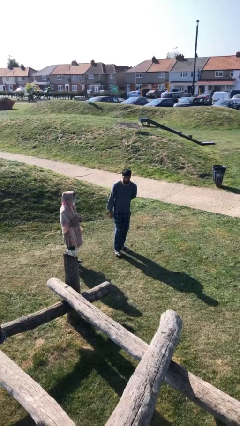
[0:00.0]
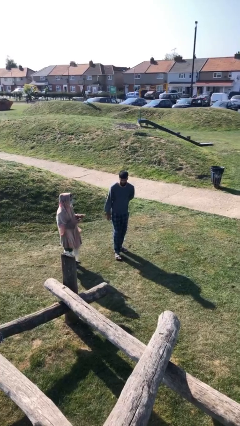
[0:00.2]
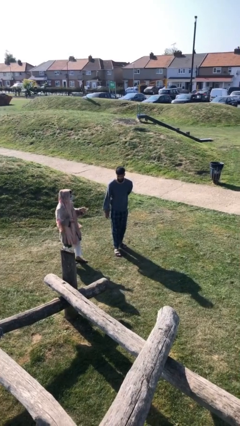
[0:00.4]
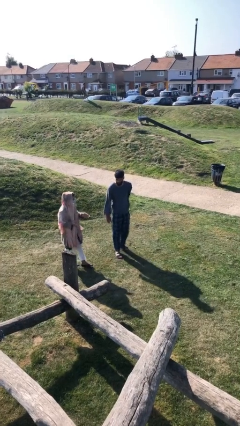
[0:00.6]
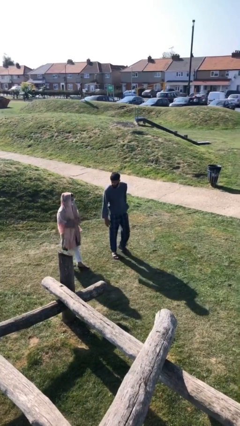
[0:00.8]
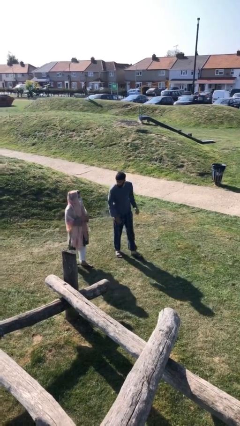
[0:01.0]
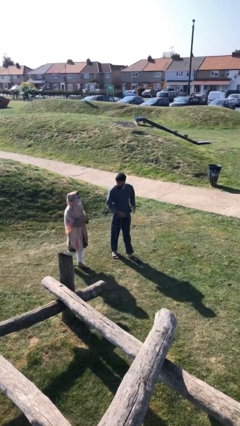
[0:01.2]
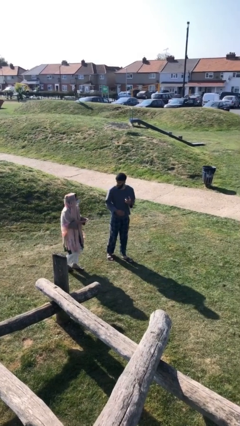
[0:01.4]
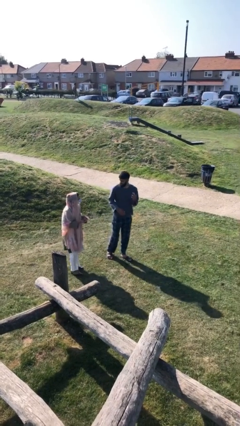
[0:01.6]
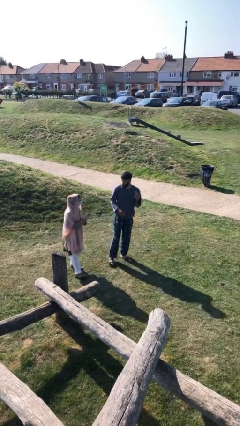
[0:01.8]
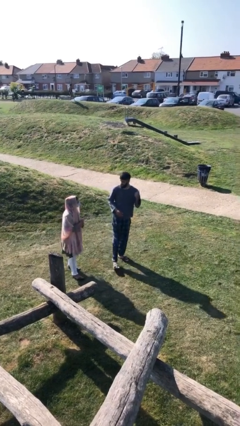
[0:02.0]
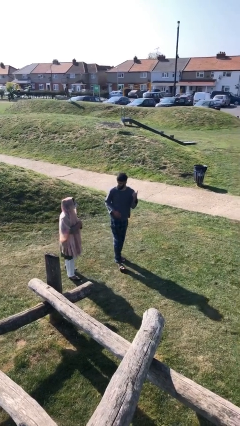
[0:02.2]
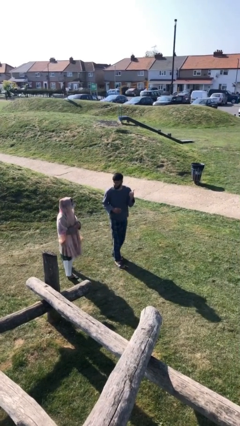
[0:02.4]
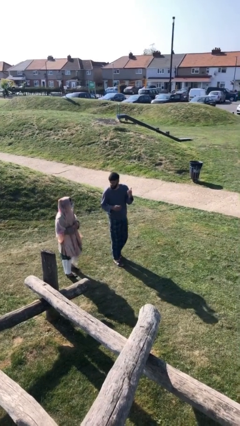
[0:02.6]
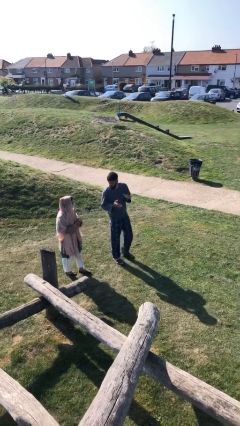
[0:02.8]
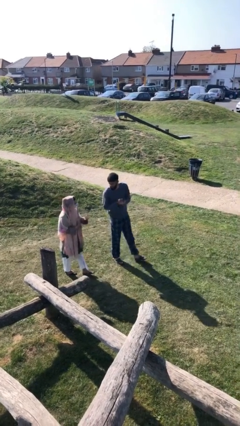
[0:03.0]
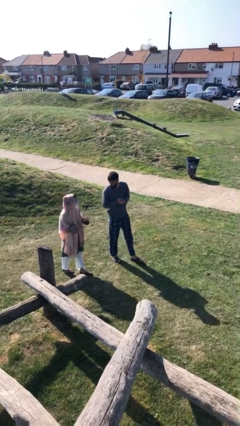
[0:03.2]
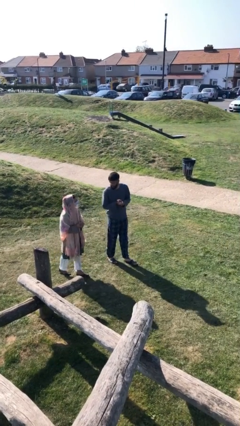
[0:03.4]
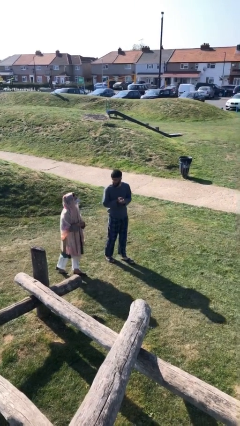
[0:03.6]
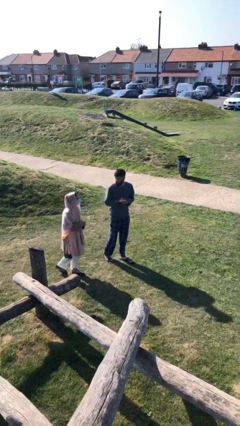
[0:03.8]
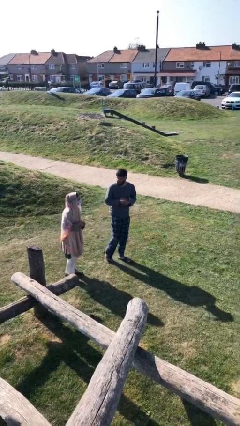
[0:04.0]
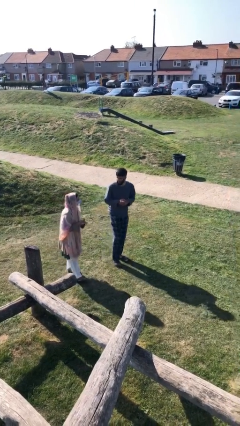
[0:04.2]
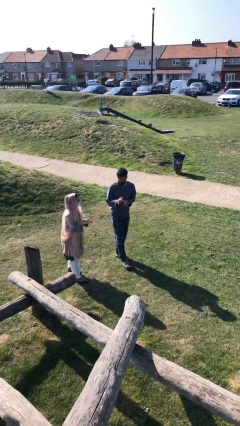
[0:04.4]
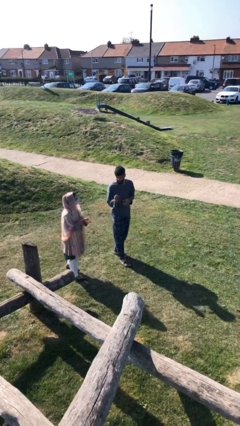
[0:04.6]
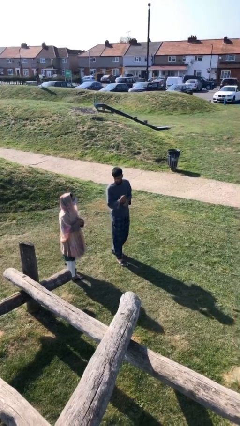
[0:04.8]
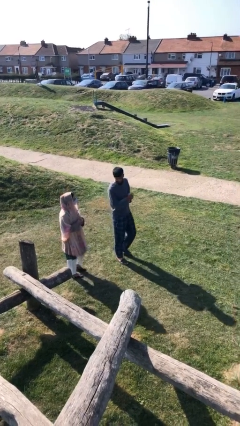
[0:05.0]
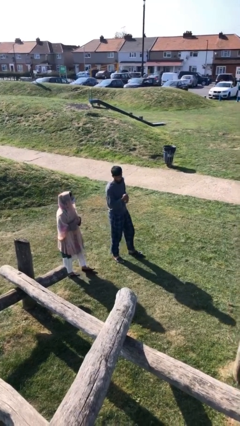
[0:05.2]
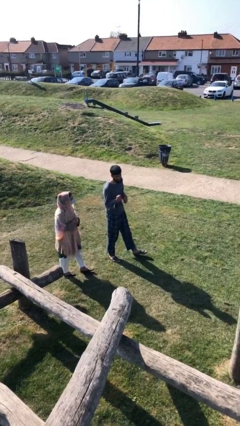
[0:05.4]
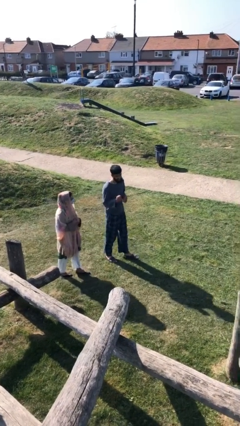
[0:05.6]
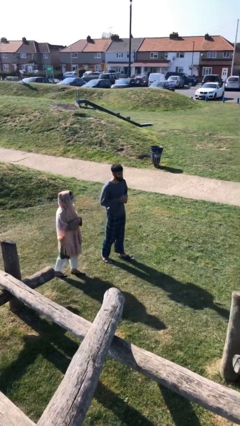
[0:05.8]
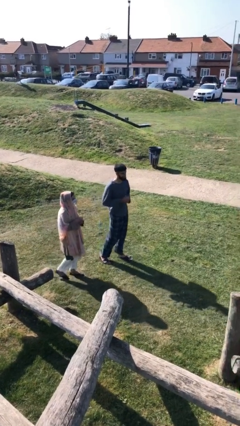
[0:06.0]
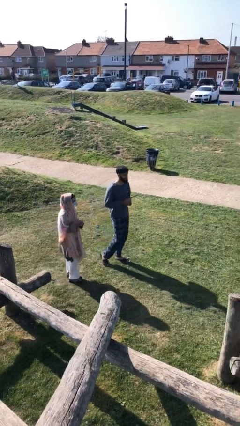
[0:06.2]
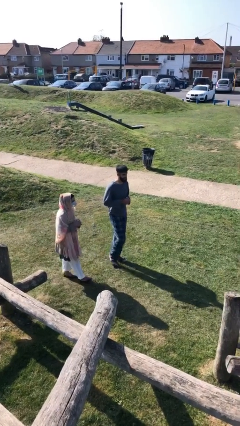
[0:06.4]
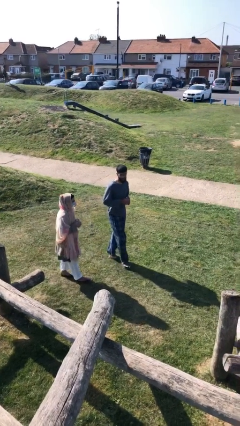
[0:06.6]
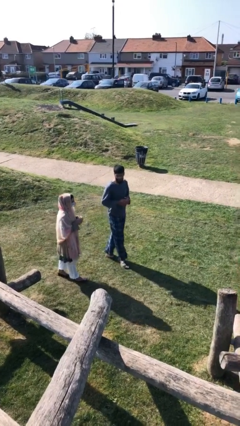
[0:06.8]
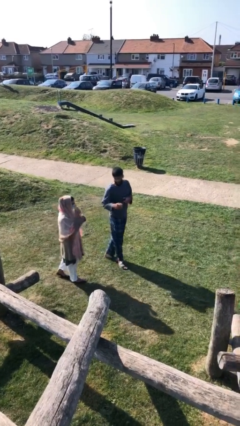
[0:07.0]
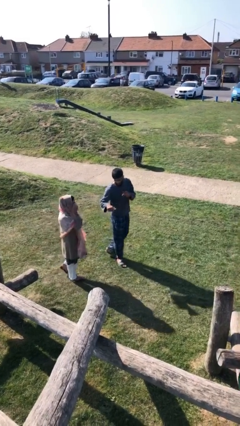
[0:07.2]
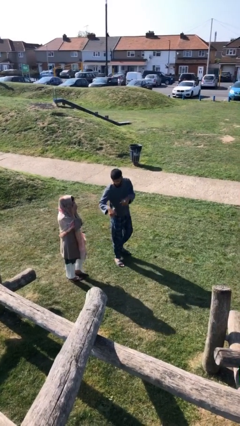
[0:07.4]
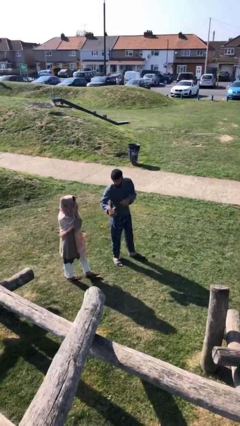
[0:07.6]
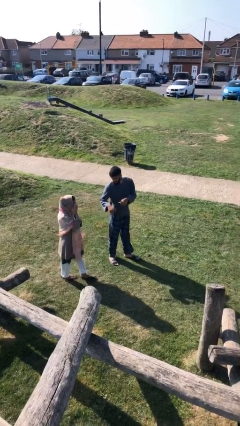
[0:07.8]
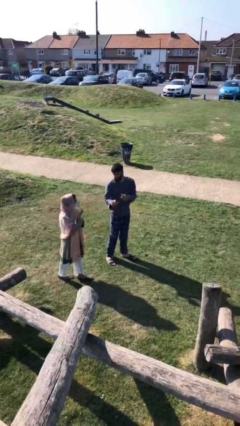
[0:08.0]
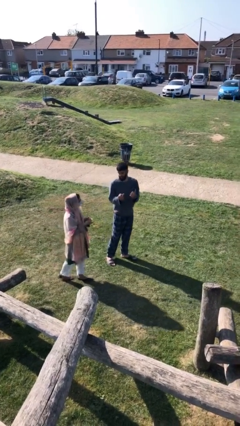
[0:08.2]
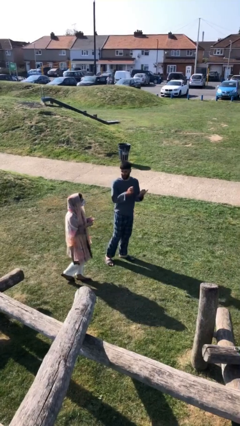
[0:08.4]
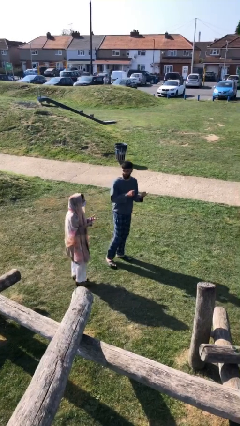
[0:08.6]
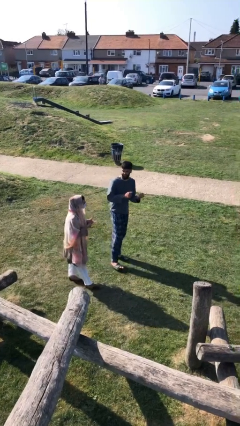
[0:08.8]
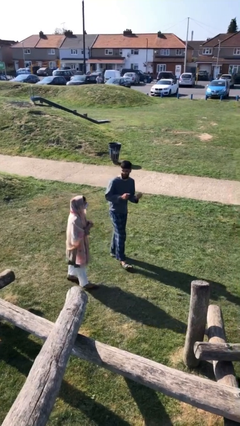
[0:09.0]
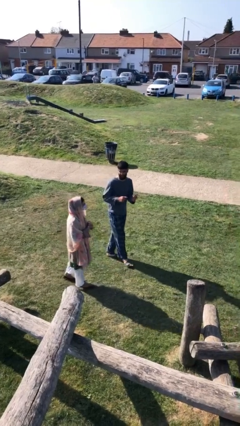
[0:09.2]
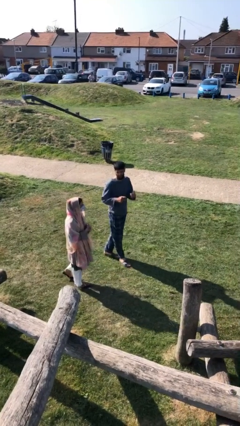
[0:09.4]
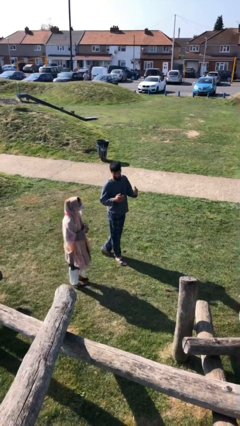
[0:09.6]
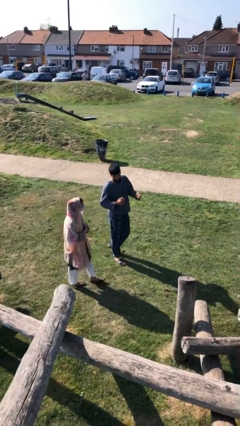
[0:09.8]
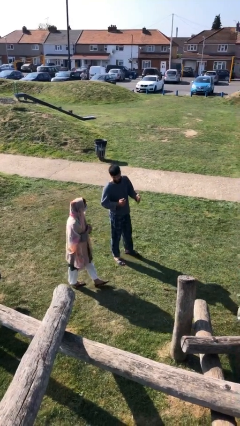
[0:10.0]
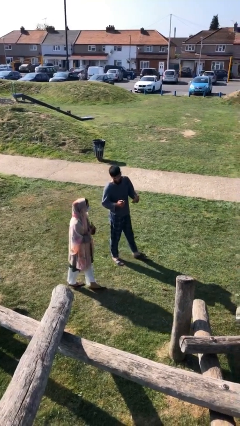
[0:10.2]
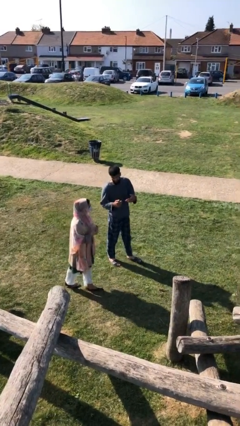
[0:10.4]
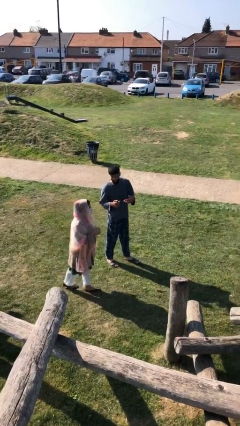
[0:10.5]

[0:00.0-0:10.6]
person talks to person

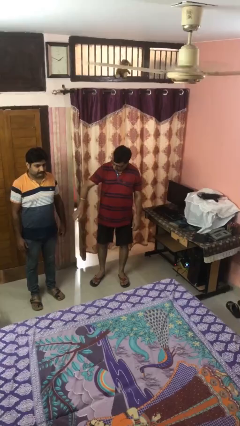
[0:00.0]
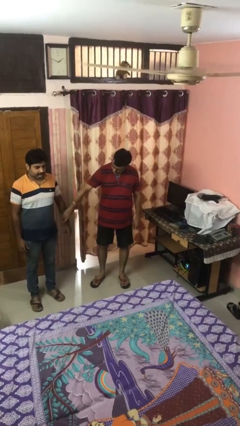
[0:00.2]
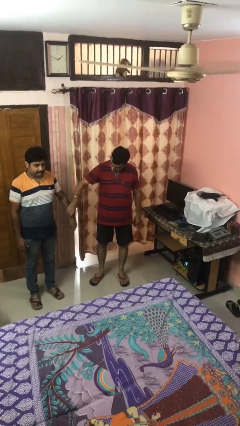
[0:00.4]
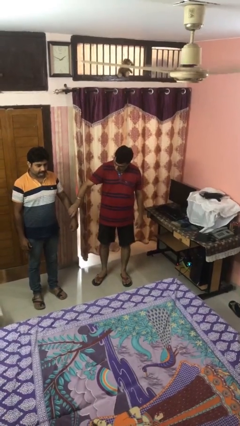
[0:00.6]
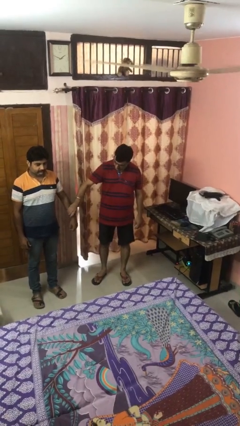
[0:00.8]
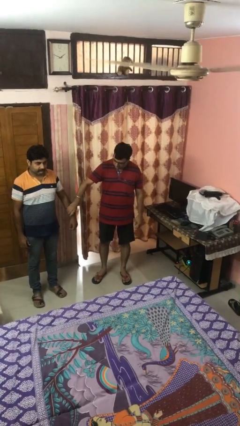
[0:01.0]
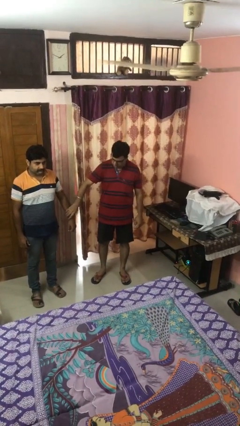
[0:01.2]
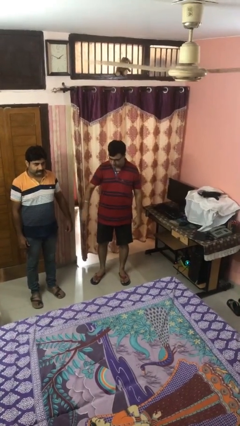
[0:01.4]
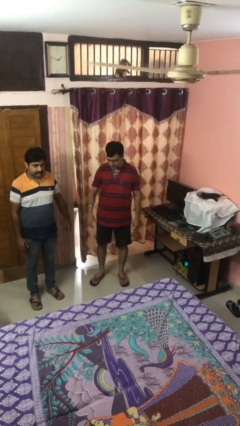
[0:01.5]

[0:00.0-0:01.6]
person grabs person by forearm

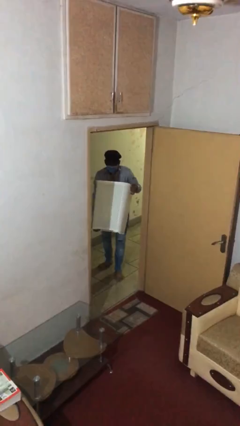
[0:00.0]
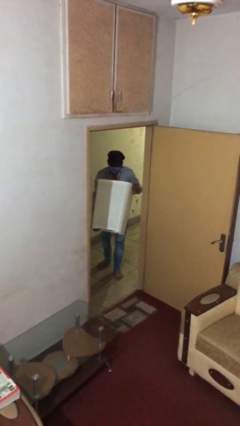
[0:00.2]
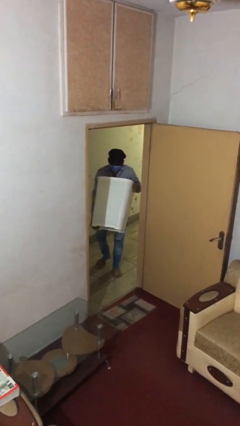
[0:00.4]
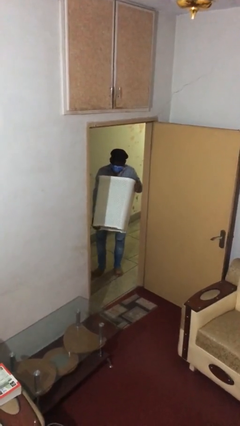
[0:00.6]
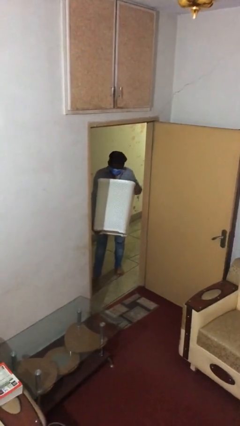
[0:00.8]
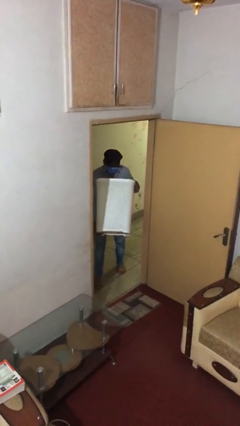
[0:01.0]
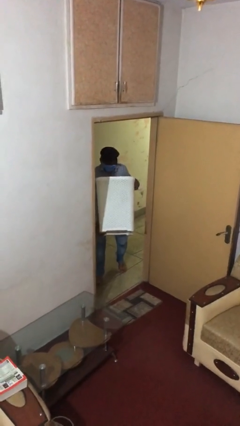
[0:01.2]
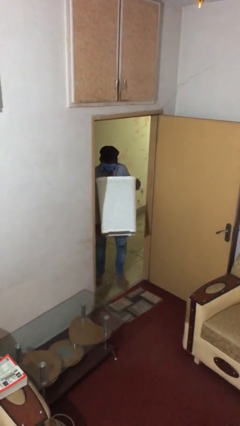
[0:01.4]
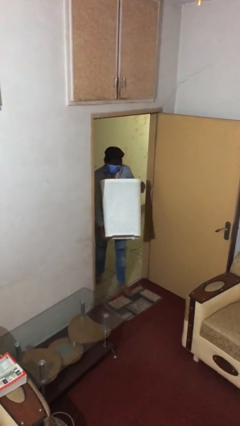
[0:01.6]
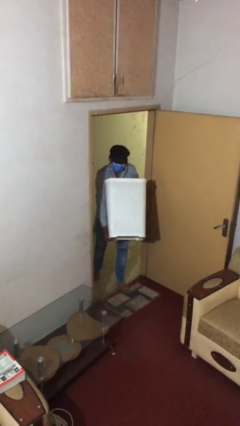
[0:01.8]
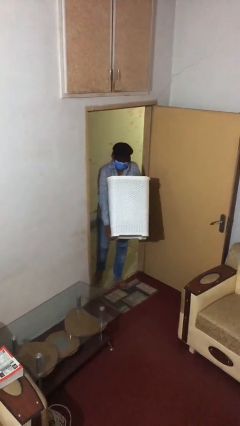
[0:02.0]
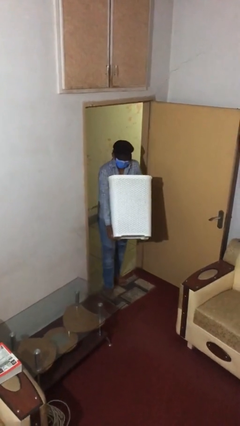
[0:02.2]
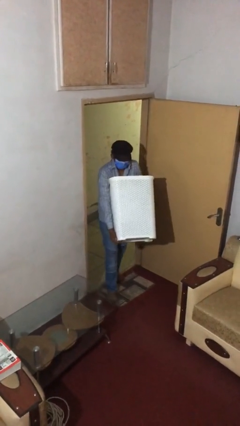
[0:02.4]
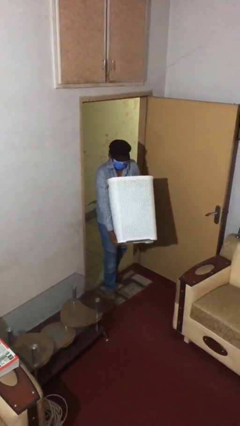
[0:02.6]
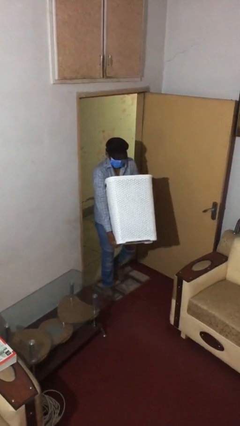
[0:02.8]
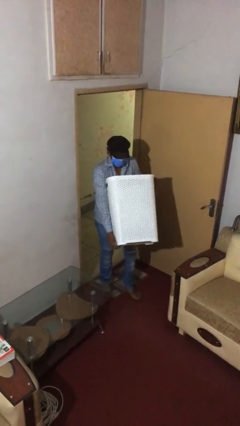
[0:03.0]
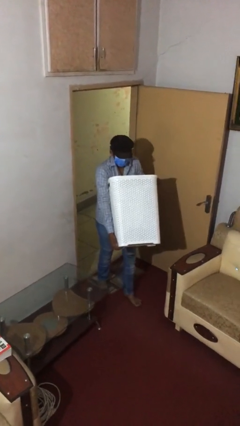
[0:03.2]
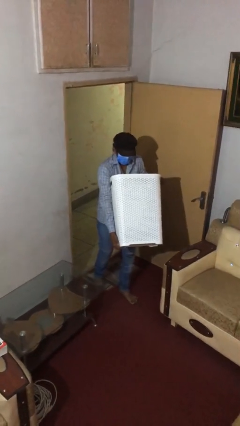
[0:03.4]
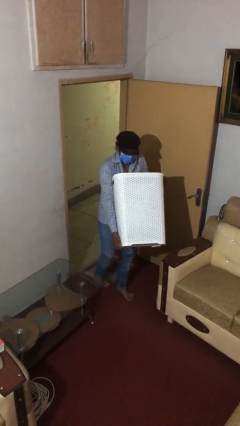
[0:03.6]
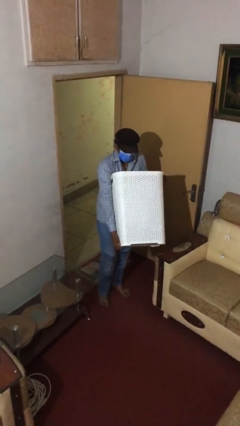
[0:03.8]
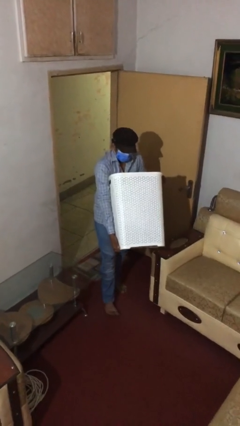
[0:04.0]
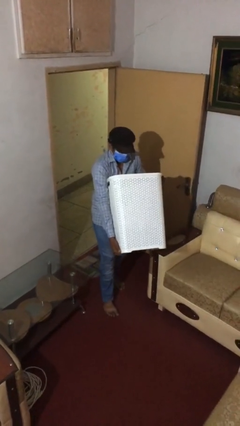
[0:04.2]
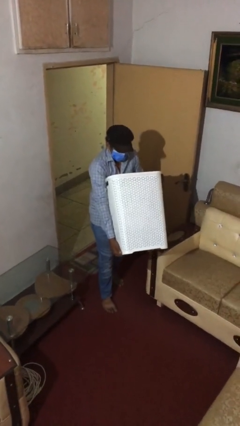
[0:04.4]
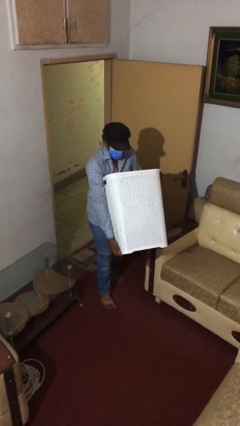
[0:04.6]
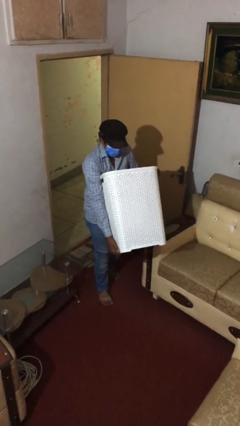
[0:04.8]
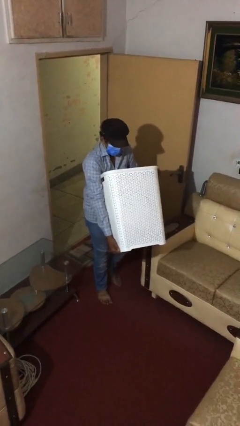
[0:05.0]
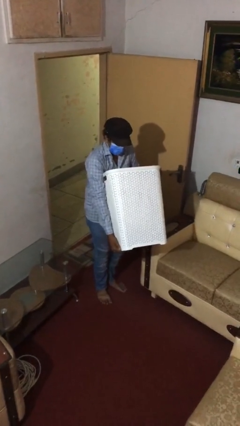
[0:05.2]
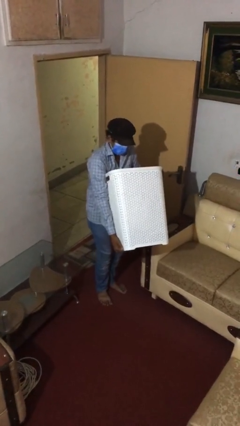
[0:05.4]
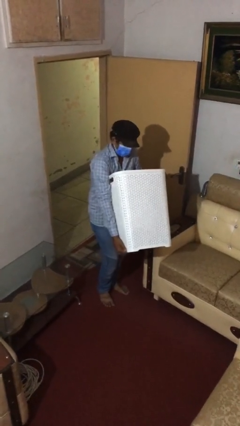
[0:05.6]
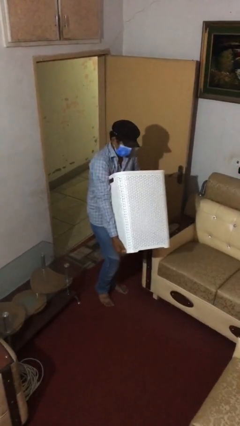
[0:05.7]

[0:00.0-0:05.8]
person carries heavy object

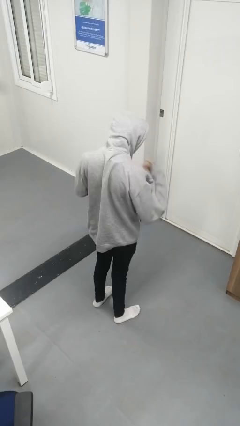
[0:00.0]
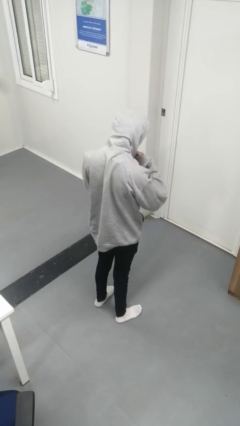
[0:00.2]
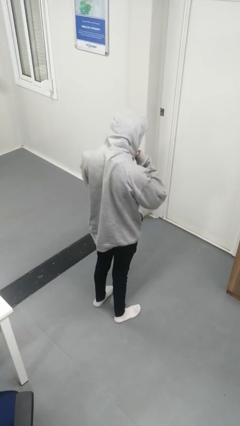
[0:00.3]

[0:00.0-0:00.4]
person takes off hoodie
